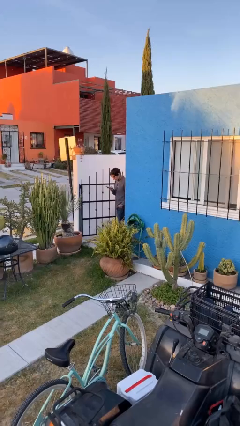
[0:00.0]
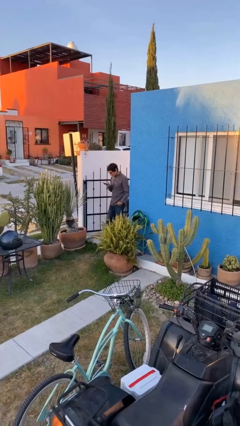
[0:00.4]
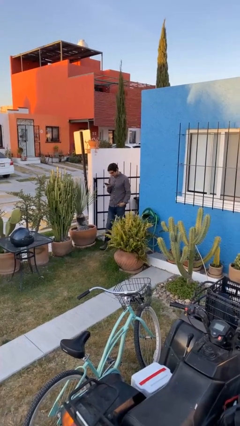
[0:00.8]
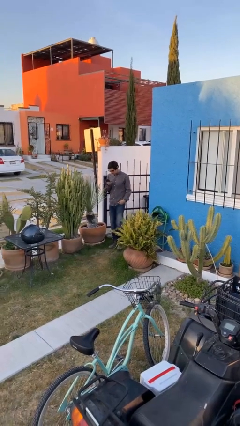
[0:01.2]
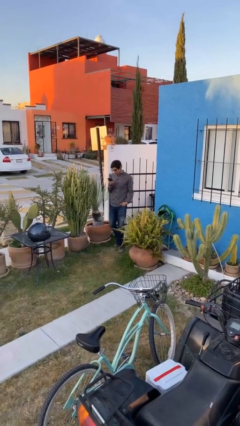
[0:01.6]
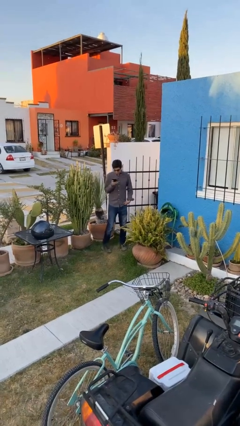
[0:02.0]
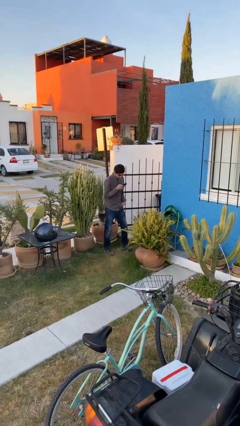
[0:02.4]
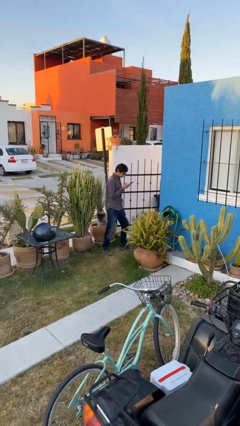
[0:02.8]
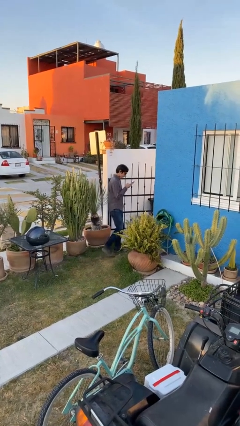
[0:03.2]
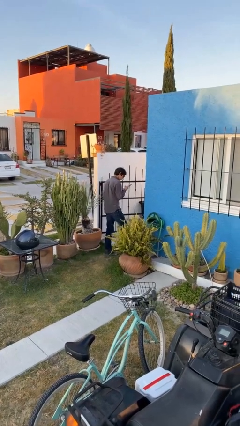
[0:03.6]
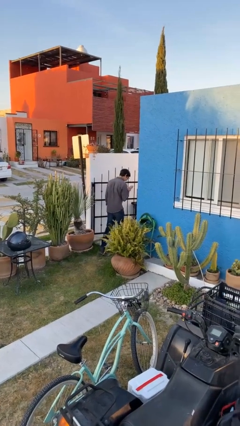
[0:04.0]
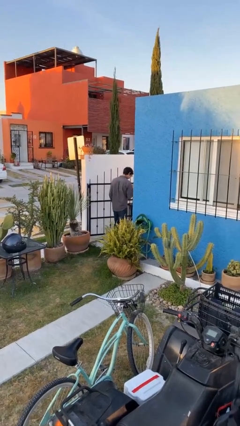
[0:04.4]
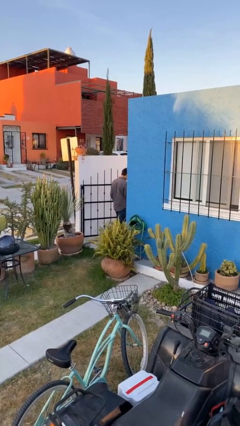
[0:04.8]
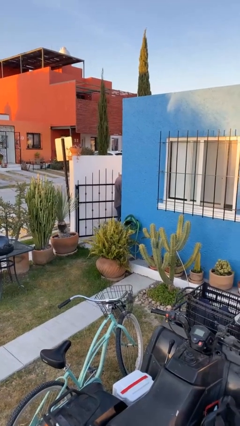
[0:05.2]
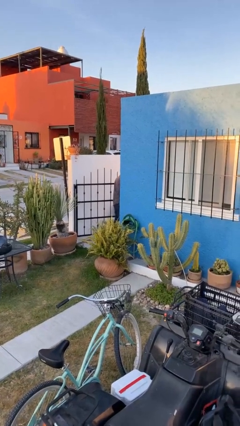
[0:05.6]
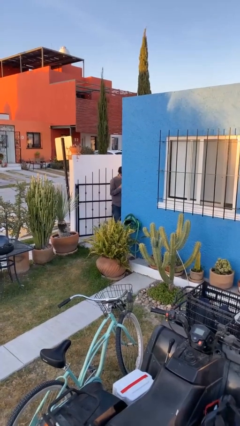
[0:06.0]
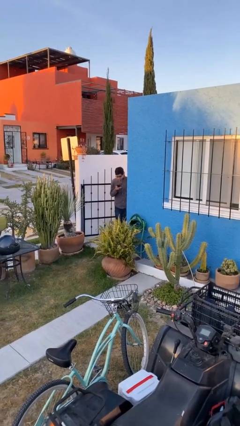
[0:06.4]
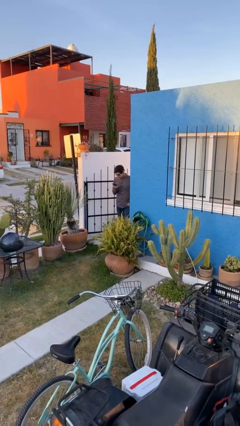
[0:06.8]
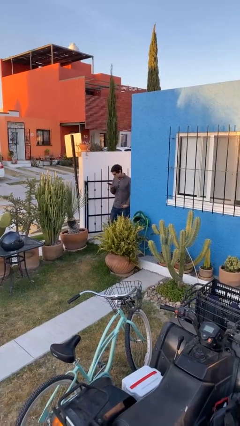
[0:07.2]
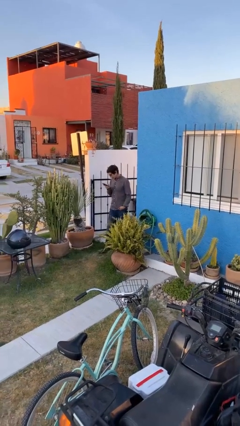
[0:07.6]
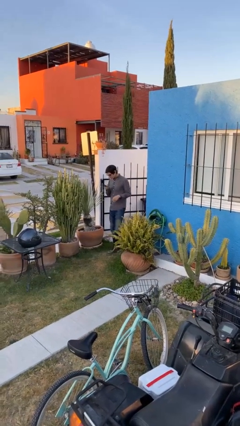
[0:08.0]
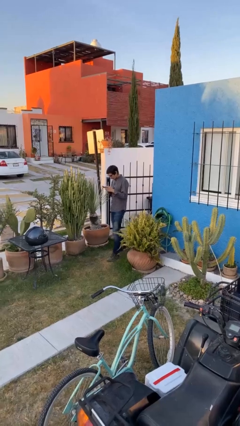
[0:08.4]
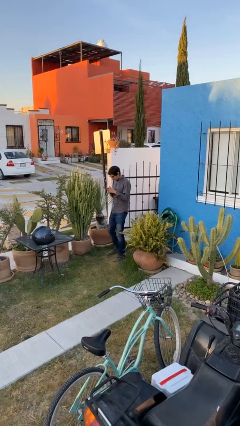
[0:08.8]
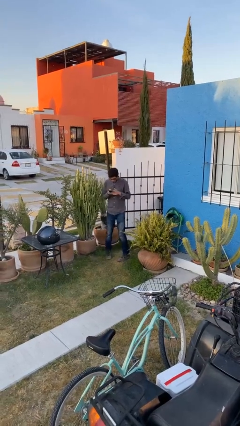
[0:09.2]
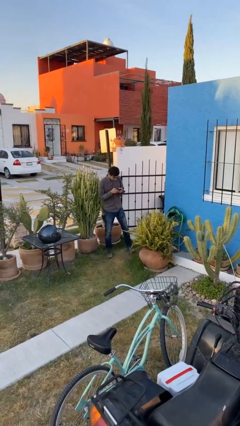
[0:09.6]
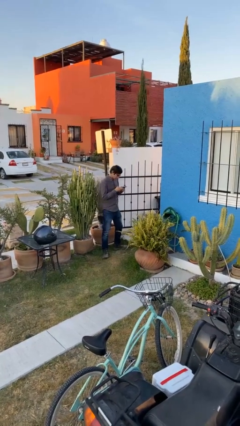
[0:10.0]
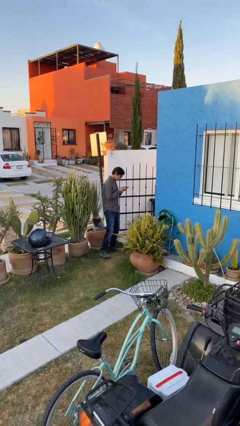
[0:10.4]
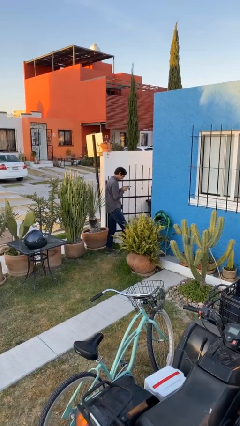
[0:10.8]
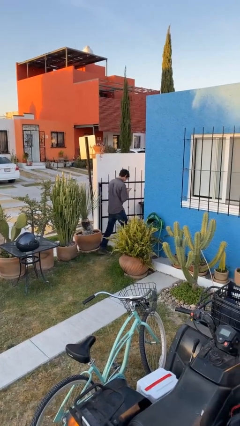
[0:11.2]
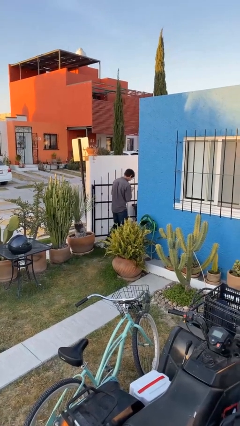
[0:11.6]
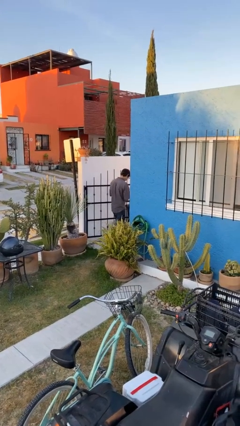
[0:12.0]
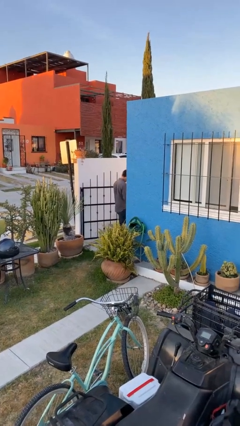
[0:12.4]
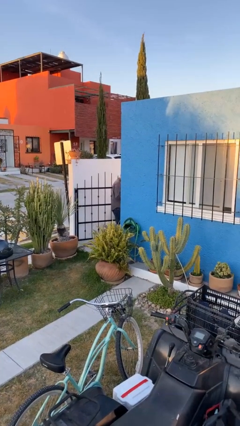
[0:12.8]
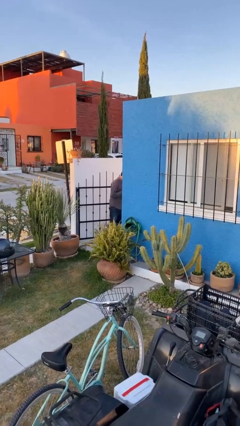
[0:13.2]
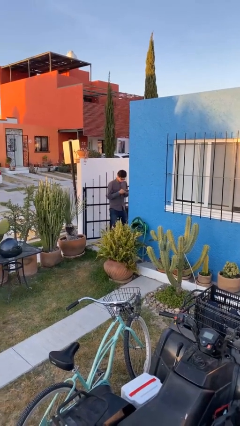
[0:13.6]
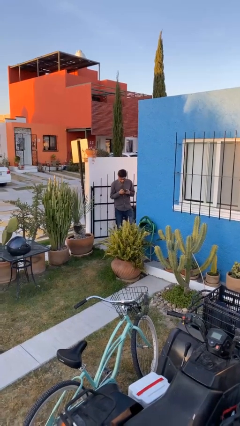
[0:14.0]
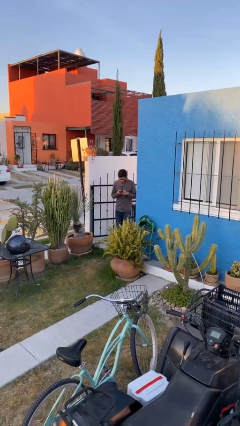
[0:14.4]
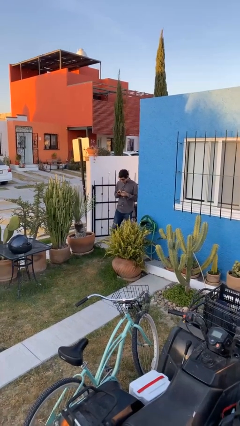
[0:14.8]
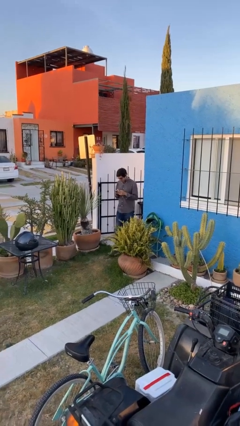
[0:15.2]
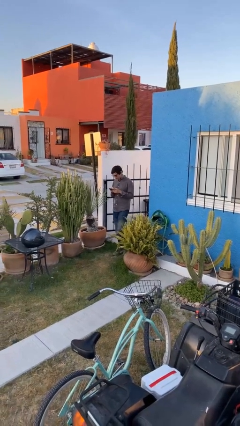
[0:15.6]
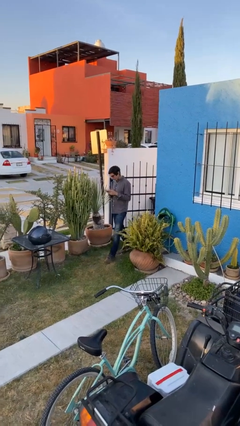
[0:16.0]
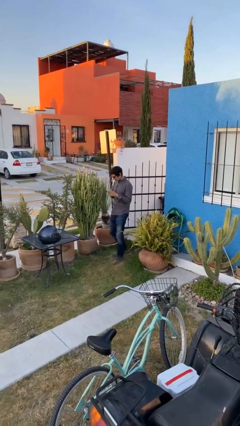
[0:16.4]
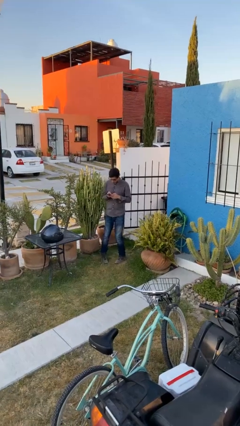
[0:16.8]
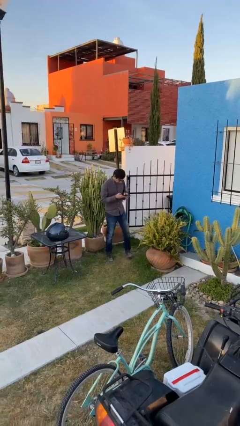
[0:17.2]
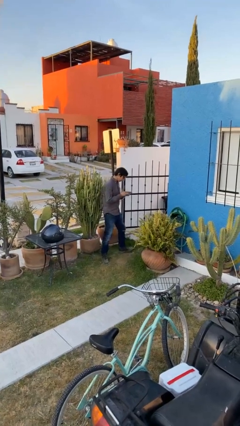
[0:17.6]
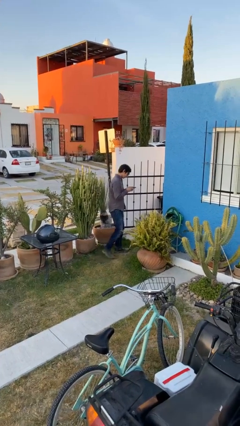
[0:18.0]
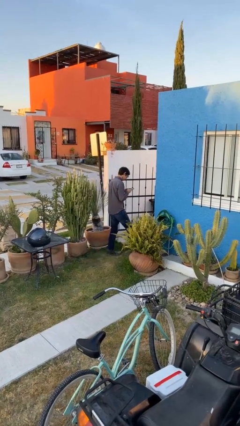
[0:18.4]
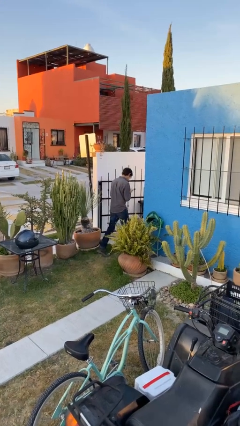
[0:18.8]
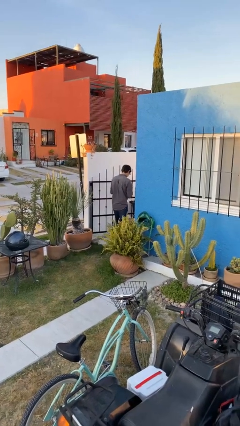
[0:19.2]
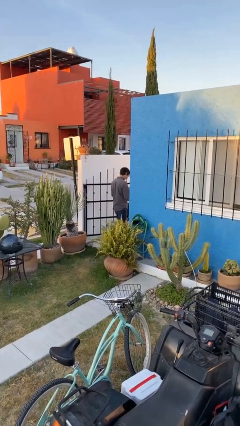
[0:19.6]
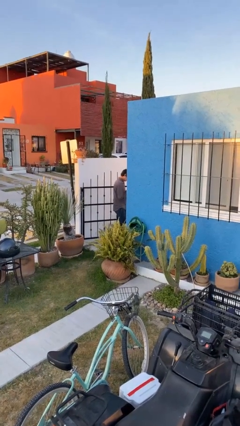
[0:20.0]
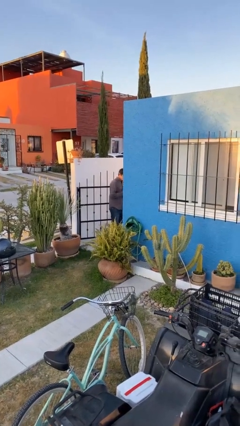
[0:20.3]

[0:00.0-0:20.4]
person texts on phone

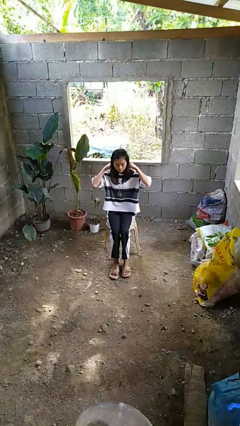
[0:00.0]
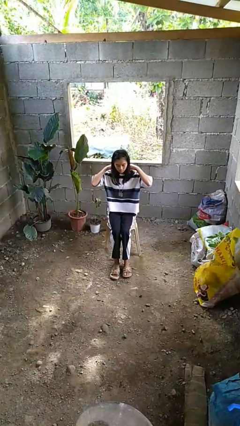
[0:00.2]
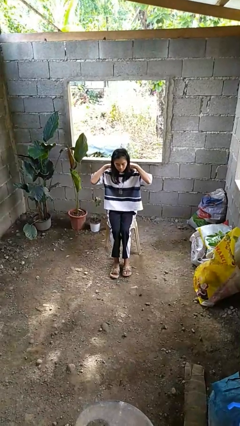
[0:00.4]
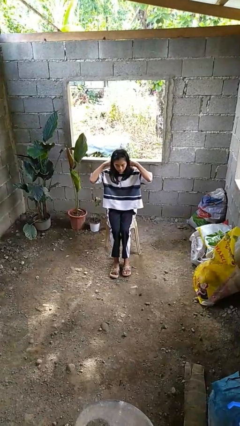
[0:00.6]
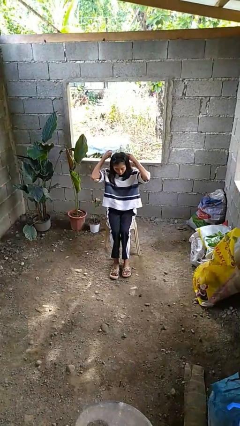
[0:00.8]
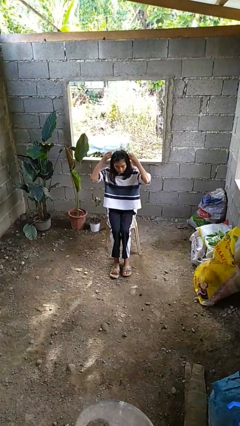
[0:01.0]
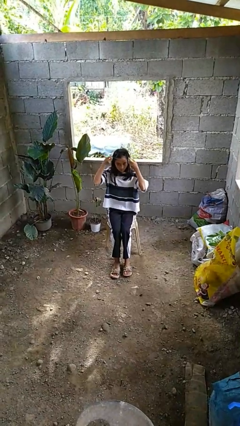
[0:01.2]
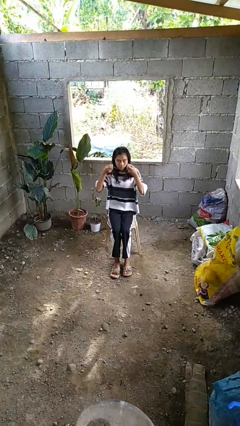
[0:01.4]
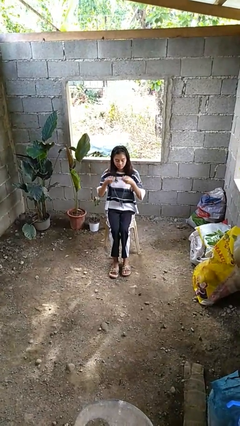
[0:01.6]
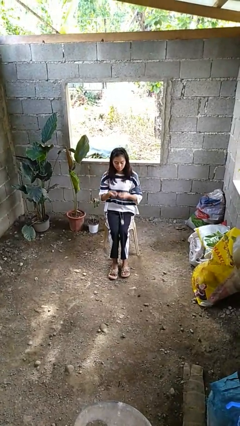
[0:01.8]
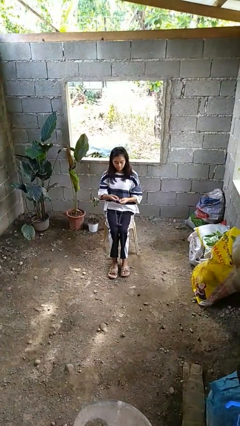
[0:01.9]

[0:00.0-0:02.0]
person takes off necklace

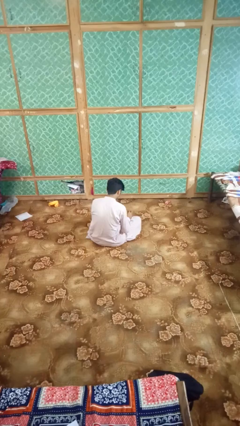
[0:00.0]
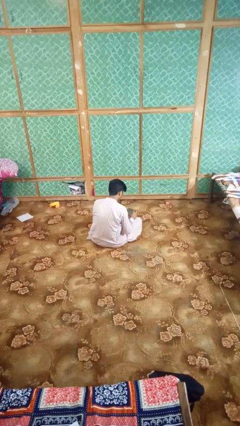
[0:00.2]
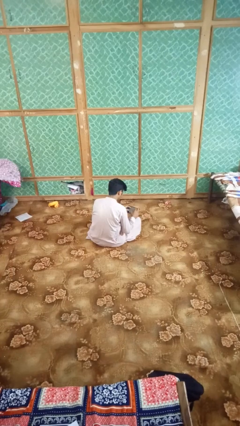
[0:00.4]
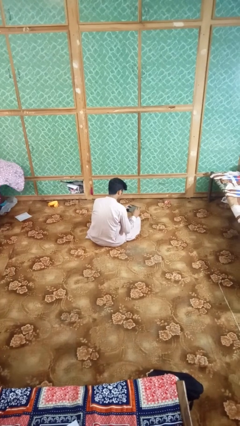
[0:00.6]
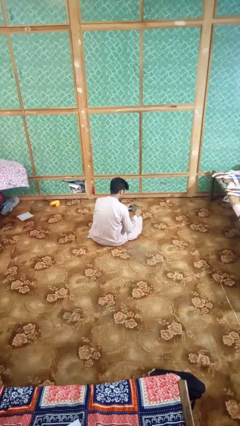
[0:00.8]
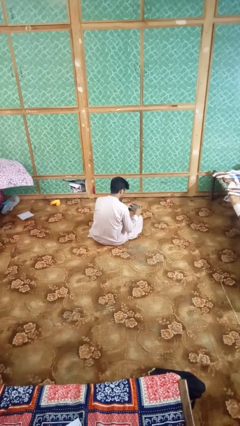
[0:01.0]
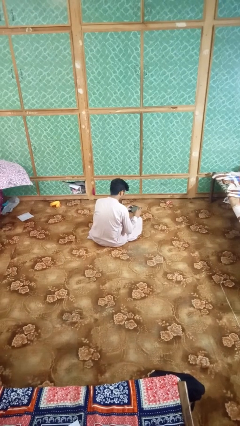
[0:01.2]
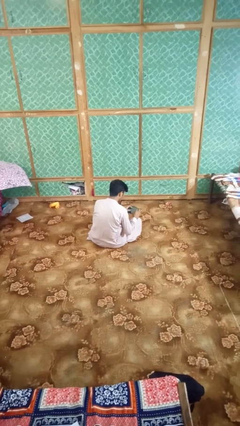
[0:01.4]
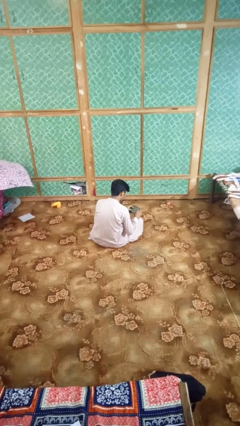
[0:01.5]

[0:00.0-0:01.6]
person interacts with tablet

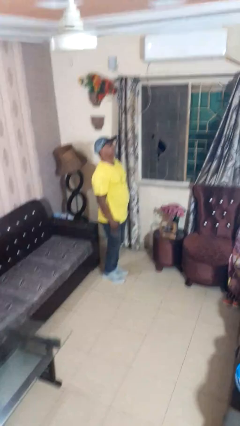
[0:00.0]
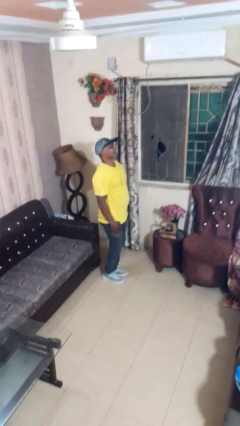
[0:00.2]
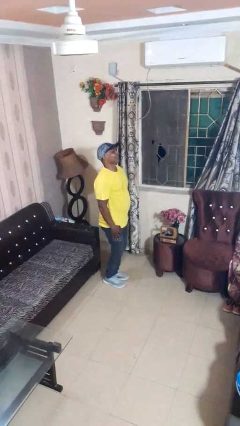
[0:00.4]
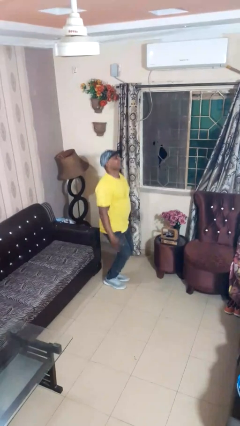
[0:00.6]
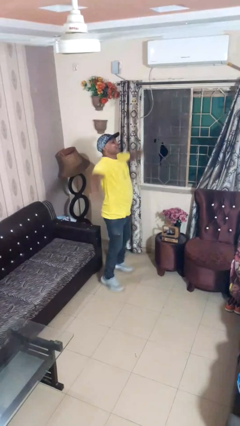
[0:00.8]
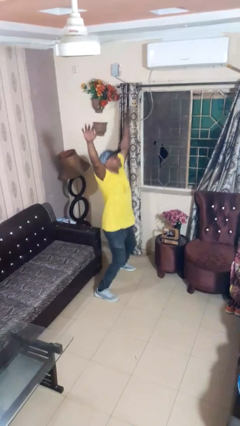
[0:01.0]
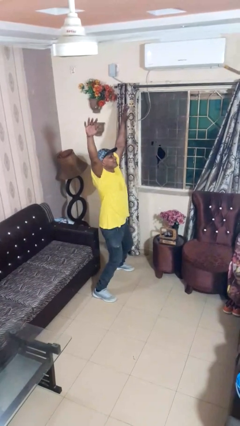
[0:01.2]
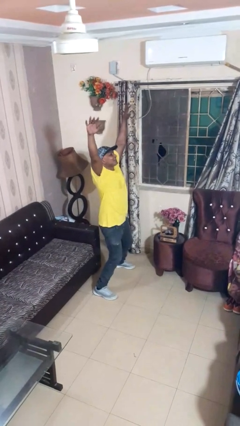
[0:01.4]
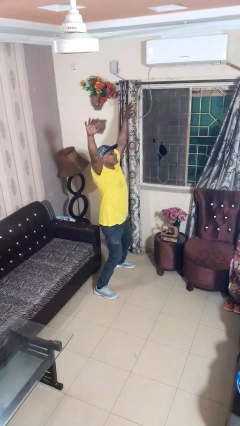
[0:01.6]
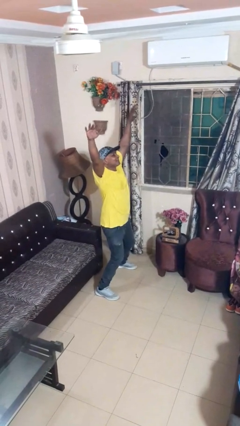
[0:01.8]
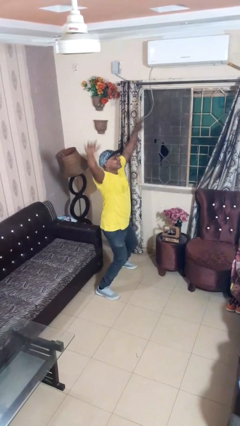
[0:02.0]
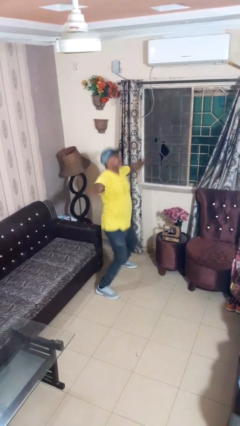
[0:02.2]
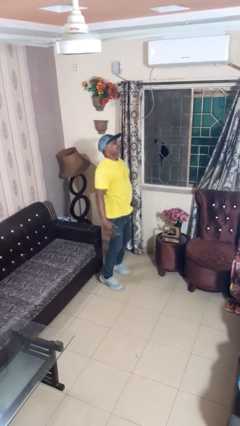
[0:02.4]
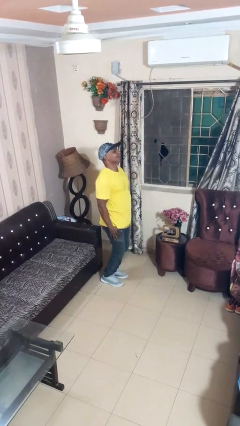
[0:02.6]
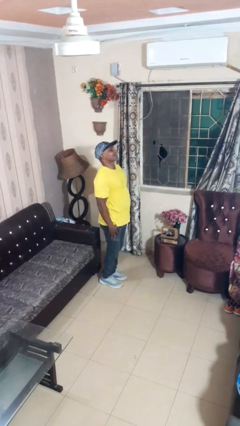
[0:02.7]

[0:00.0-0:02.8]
person exercises with jumping jacks

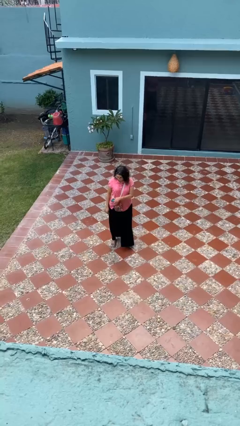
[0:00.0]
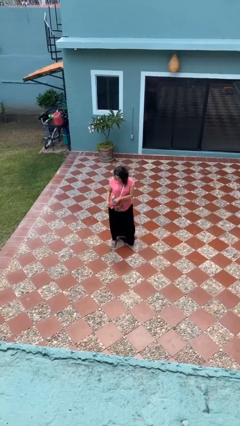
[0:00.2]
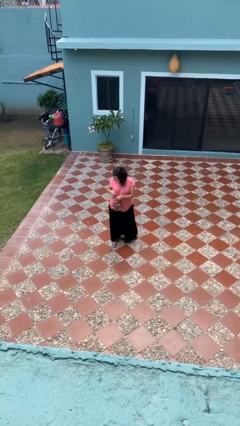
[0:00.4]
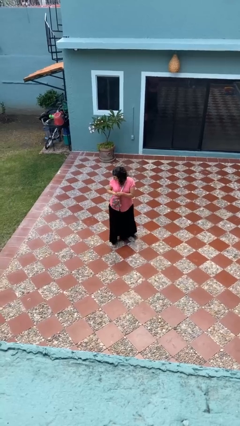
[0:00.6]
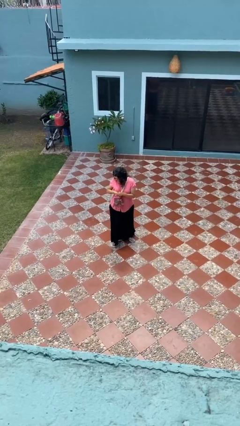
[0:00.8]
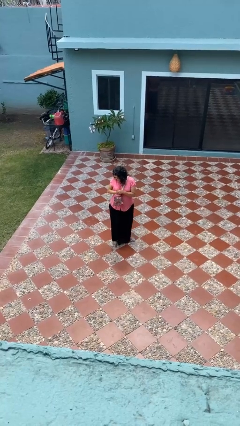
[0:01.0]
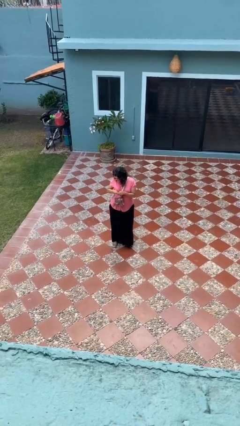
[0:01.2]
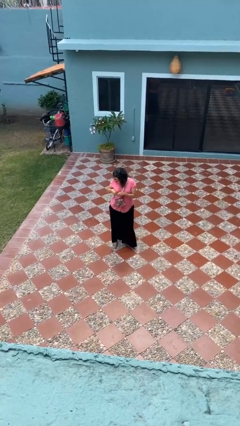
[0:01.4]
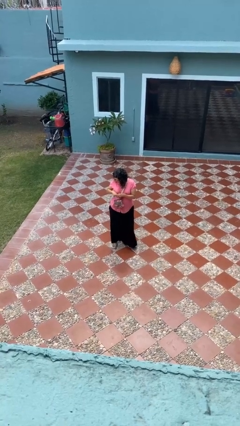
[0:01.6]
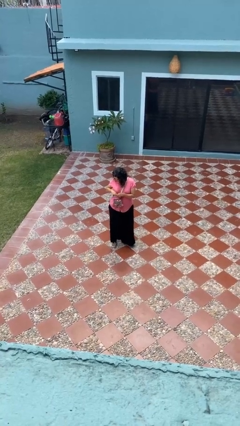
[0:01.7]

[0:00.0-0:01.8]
person searches in purse
